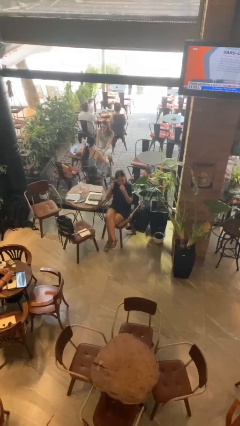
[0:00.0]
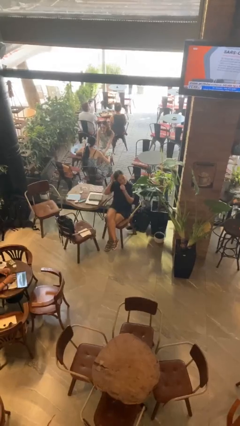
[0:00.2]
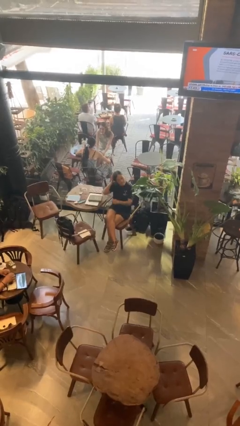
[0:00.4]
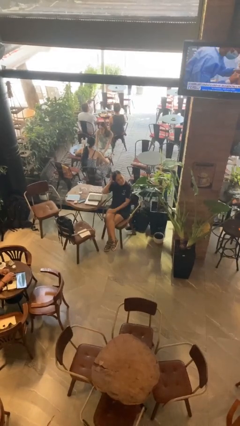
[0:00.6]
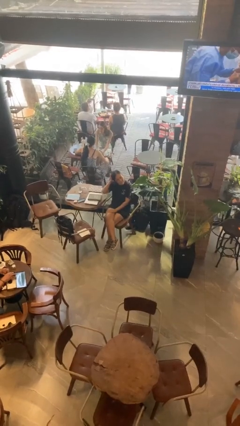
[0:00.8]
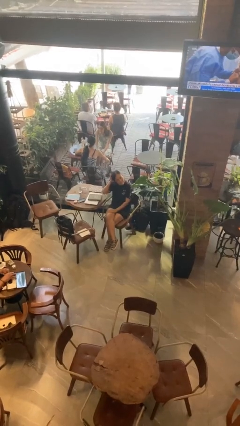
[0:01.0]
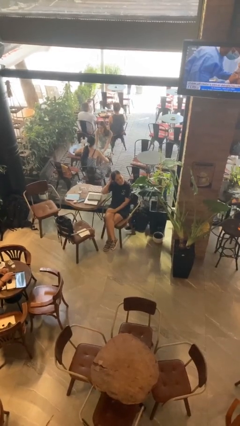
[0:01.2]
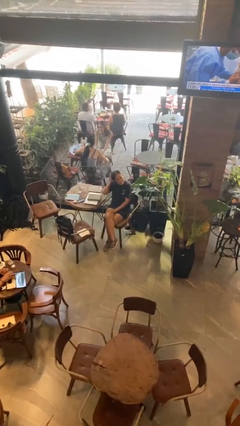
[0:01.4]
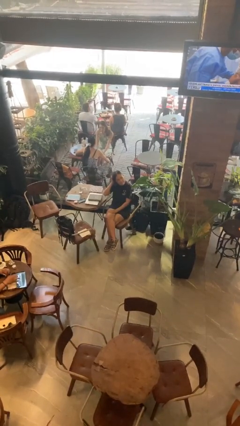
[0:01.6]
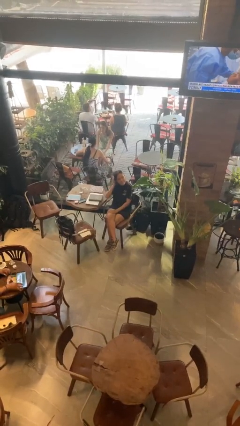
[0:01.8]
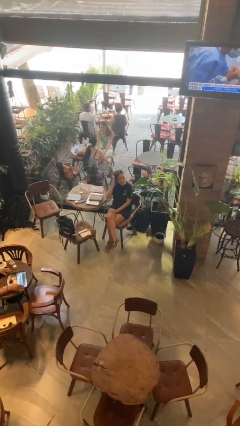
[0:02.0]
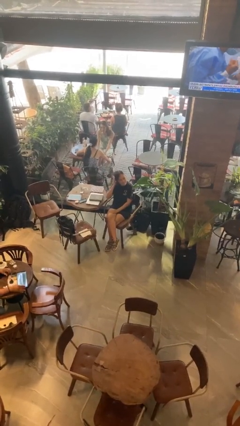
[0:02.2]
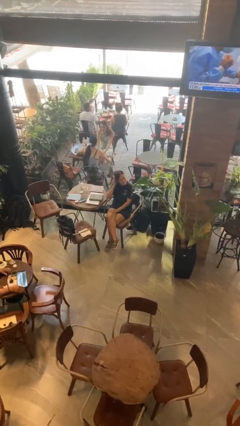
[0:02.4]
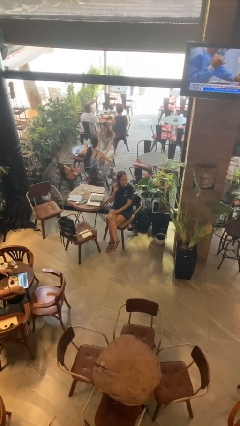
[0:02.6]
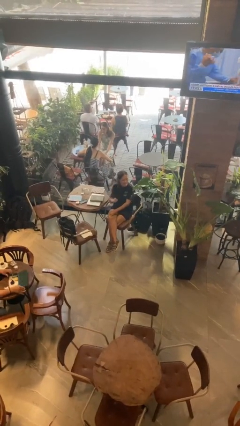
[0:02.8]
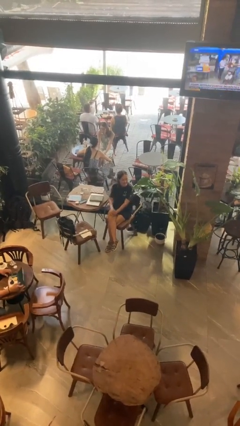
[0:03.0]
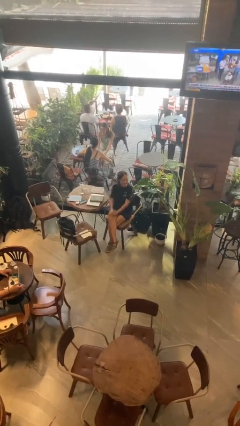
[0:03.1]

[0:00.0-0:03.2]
person scratches face

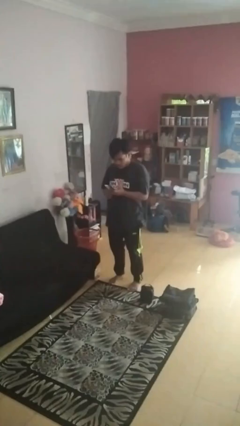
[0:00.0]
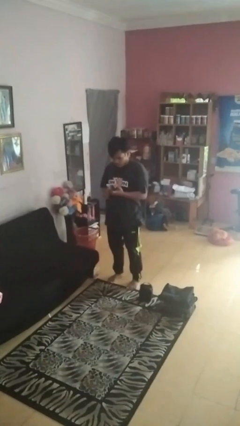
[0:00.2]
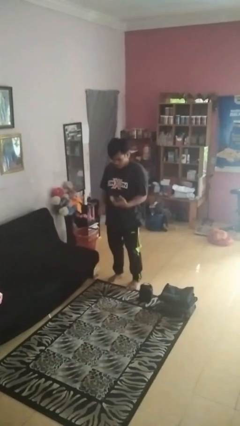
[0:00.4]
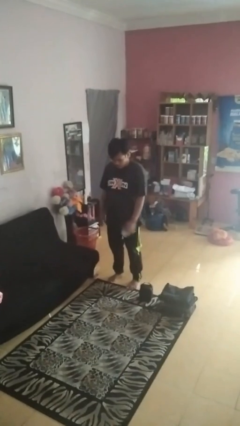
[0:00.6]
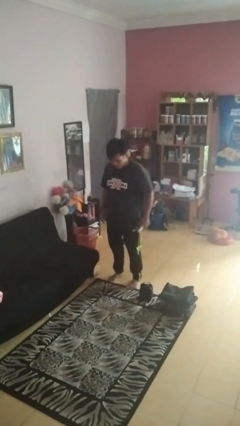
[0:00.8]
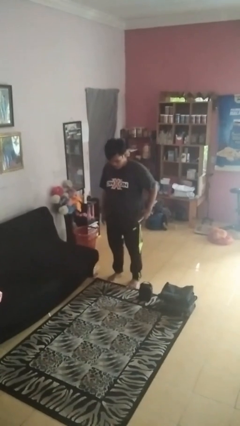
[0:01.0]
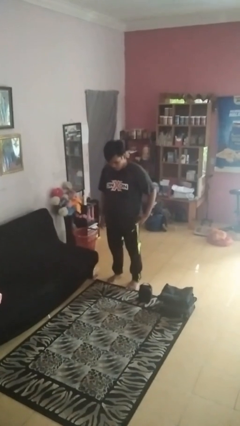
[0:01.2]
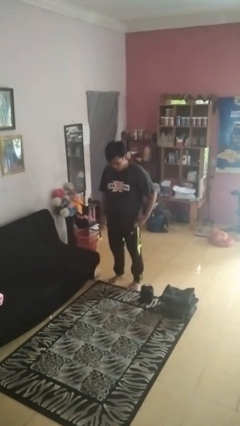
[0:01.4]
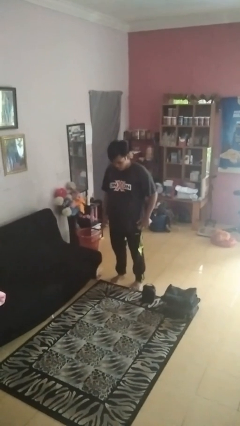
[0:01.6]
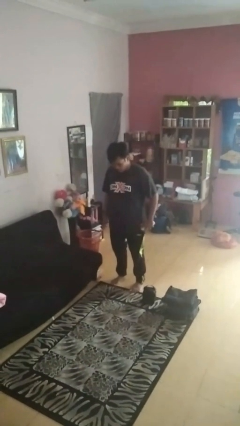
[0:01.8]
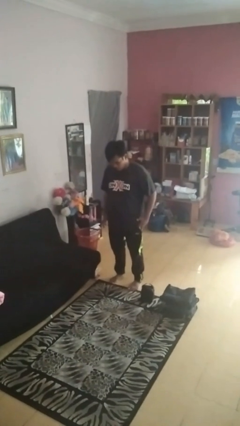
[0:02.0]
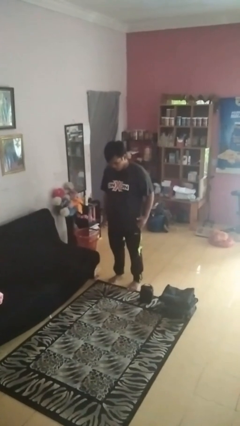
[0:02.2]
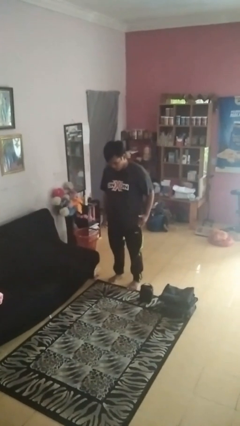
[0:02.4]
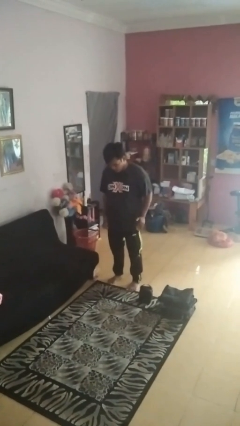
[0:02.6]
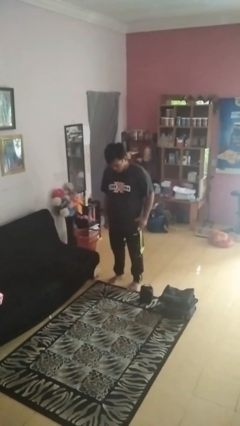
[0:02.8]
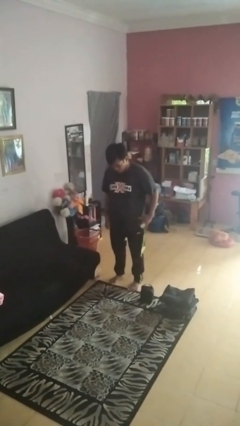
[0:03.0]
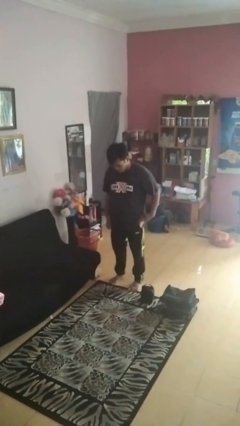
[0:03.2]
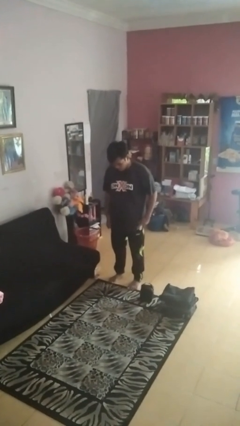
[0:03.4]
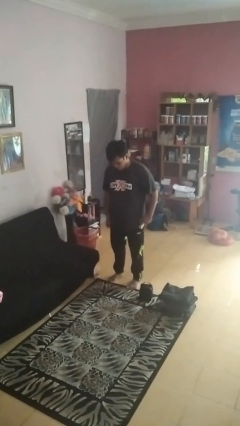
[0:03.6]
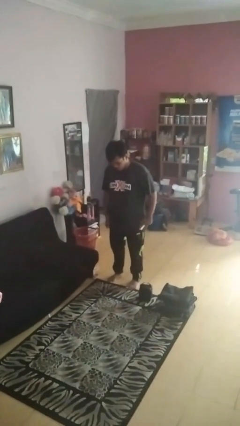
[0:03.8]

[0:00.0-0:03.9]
person puts phone into pocket

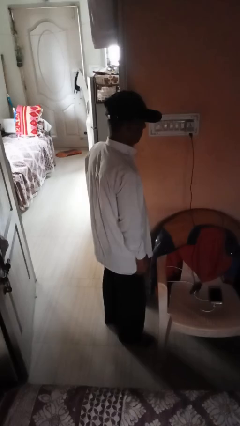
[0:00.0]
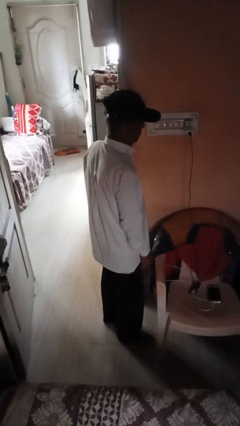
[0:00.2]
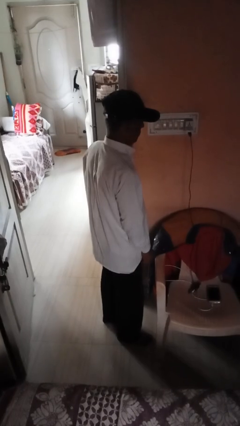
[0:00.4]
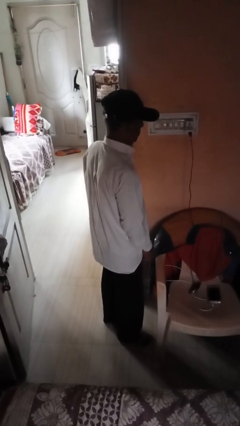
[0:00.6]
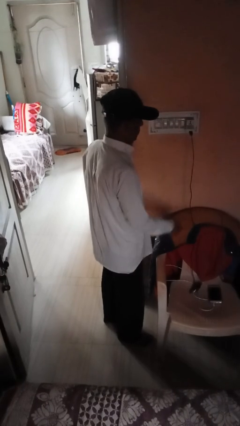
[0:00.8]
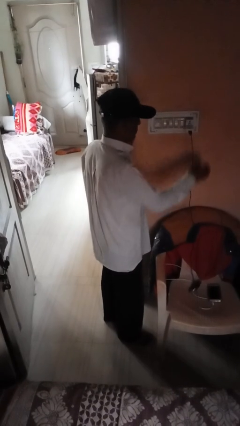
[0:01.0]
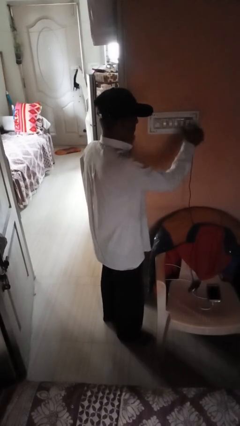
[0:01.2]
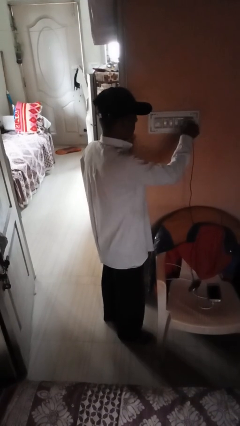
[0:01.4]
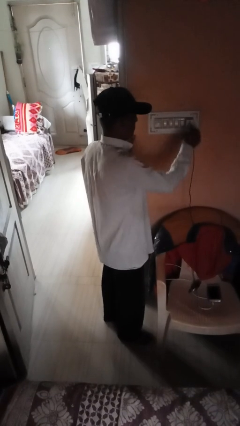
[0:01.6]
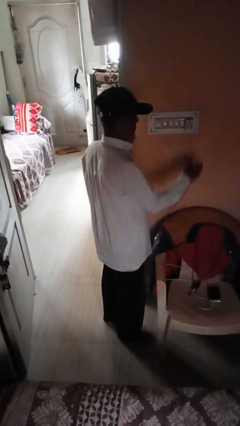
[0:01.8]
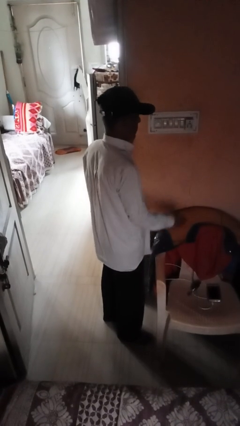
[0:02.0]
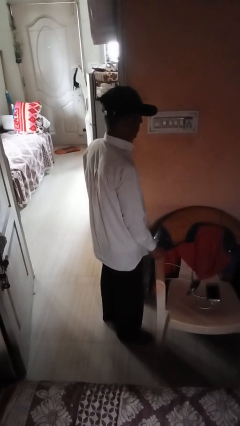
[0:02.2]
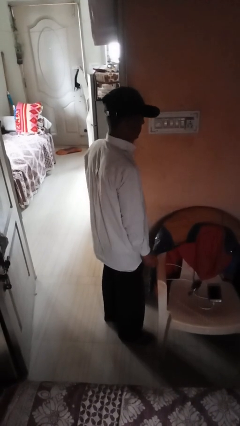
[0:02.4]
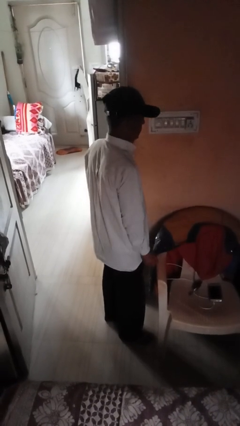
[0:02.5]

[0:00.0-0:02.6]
person unplugs from electrical socket

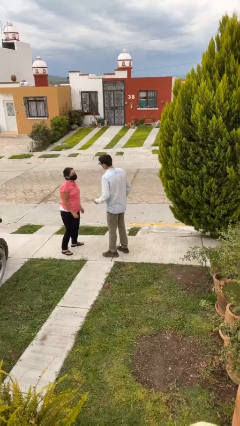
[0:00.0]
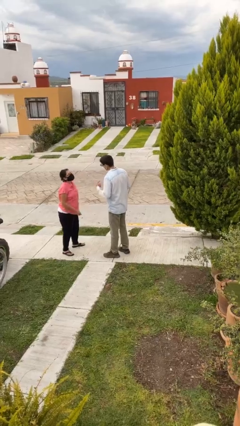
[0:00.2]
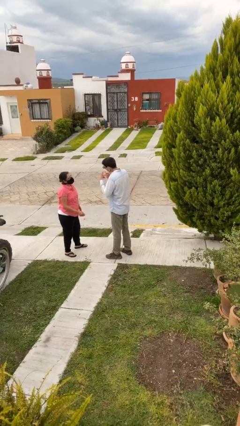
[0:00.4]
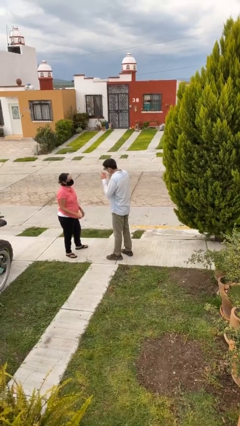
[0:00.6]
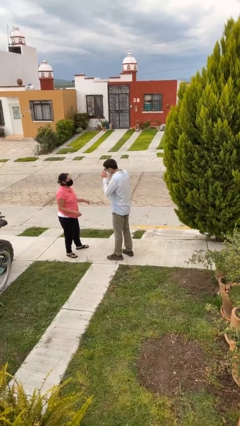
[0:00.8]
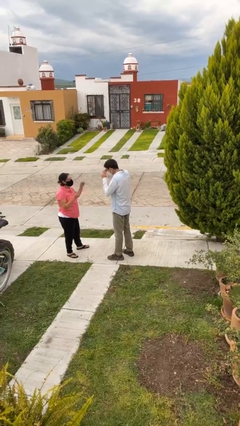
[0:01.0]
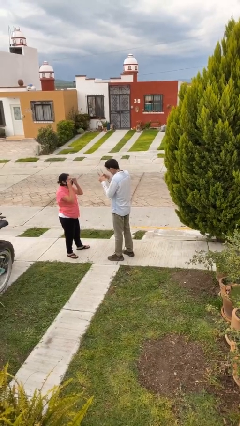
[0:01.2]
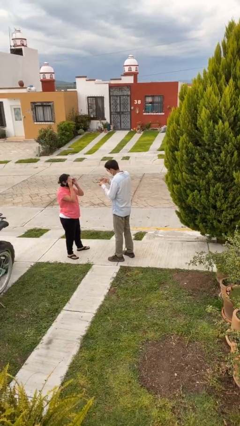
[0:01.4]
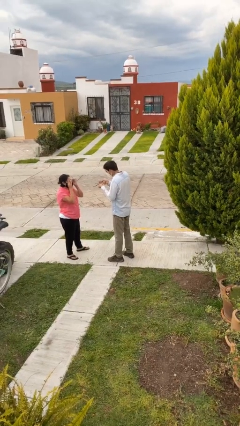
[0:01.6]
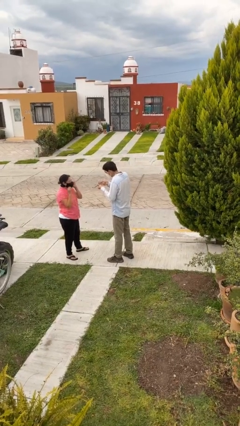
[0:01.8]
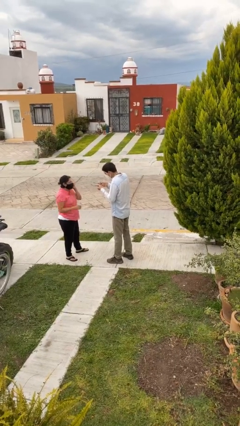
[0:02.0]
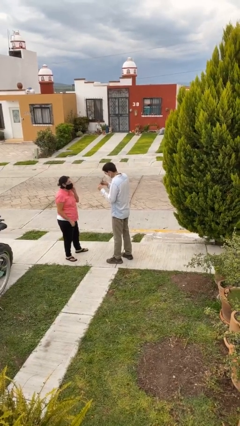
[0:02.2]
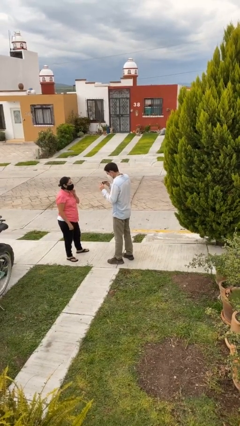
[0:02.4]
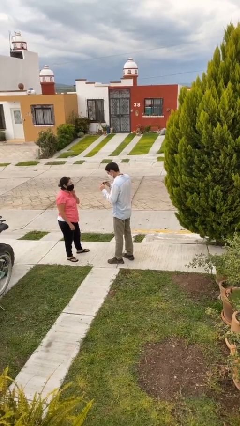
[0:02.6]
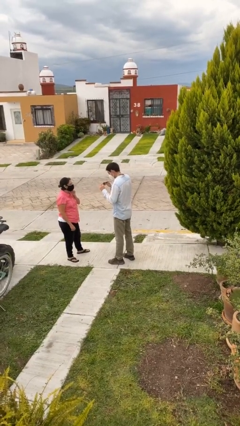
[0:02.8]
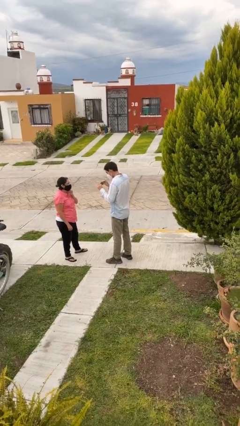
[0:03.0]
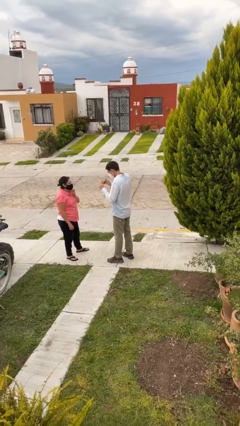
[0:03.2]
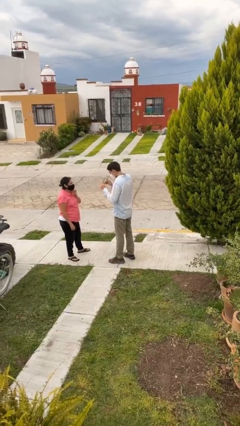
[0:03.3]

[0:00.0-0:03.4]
person talks to person

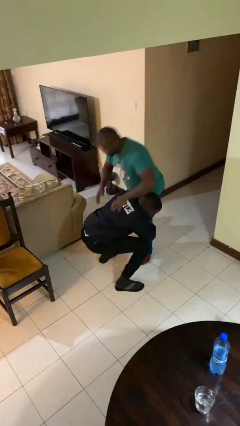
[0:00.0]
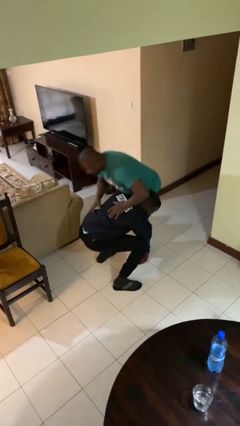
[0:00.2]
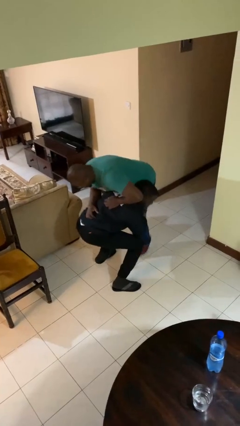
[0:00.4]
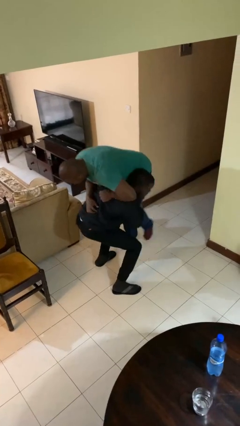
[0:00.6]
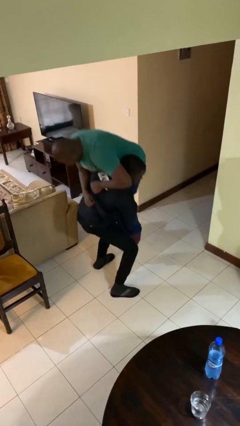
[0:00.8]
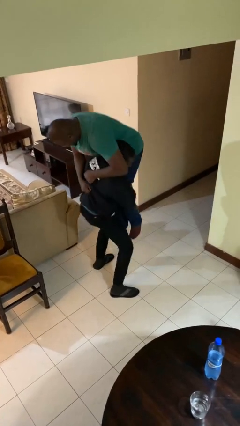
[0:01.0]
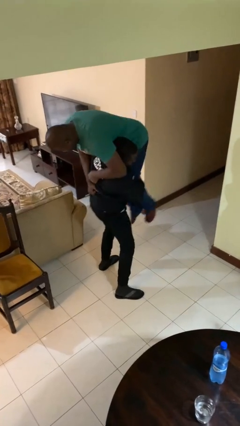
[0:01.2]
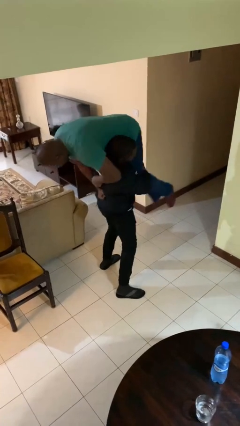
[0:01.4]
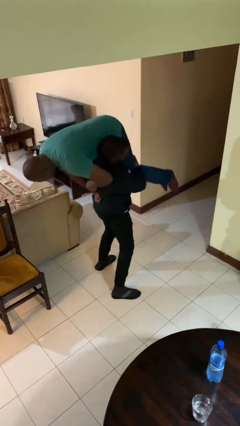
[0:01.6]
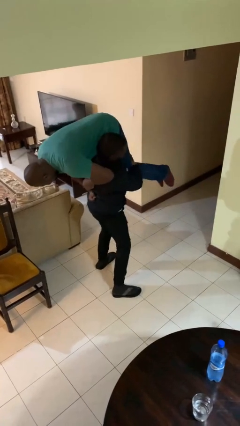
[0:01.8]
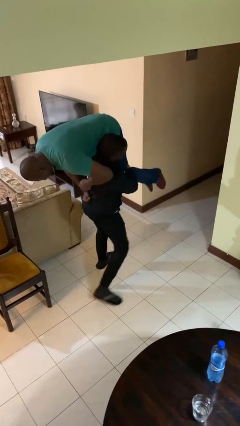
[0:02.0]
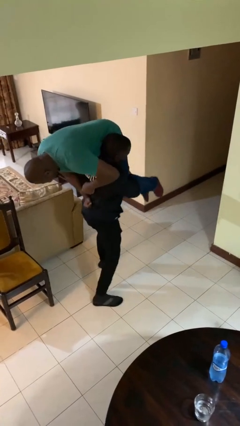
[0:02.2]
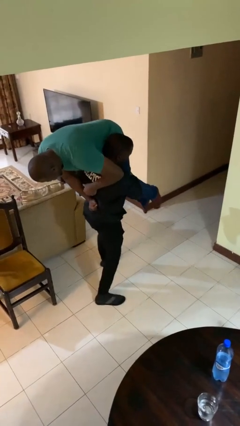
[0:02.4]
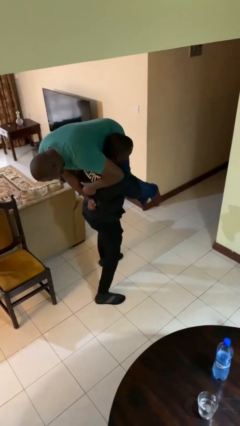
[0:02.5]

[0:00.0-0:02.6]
person carries person over shoulder

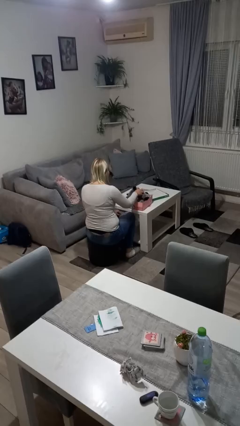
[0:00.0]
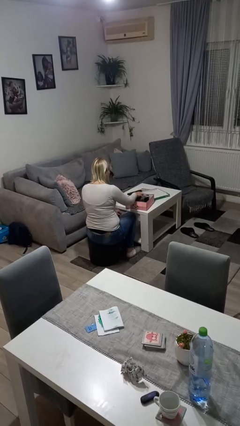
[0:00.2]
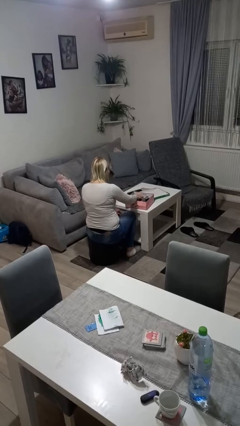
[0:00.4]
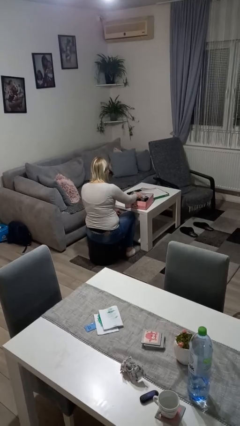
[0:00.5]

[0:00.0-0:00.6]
person puts object into box

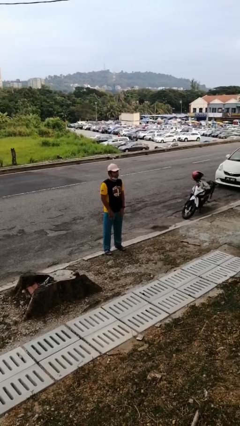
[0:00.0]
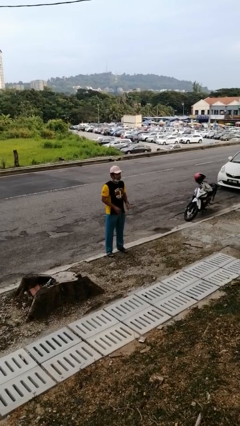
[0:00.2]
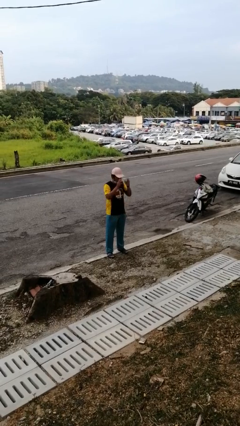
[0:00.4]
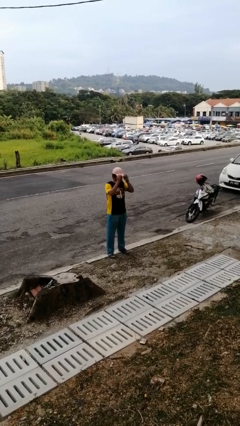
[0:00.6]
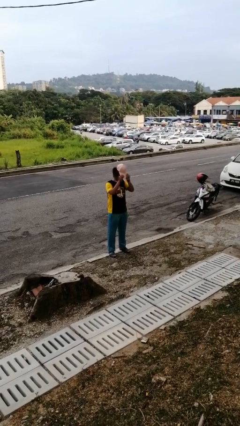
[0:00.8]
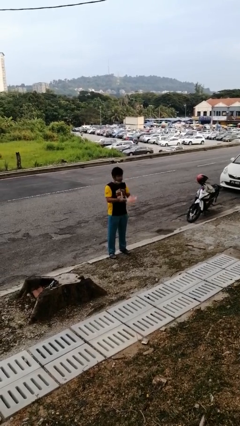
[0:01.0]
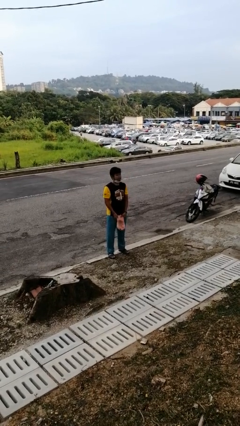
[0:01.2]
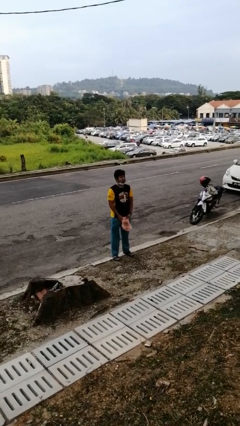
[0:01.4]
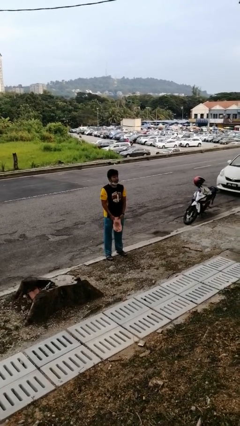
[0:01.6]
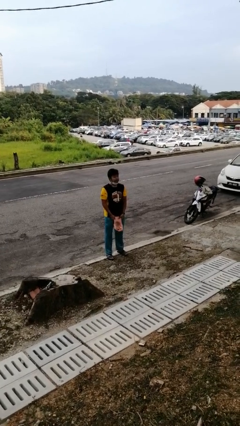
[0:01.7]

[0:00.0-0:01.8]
person takes off hat
